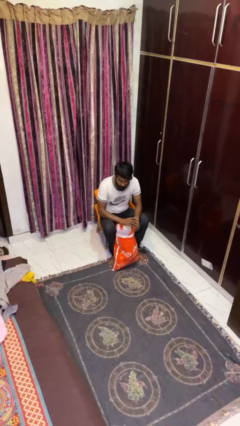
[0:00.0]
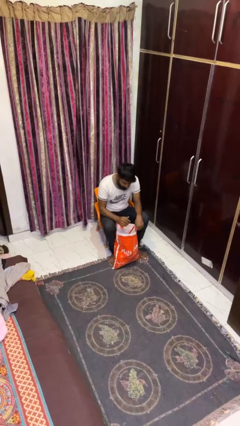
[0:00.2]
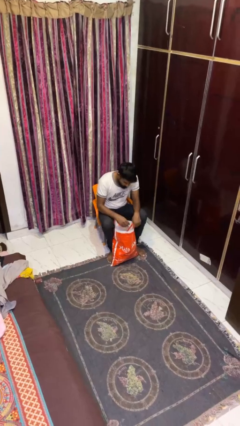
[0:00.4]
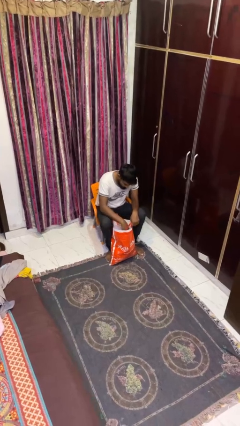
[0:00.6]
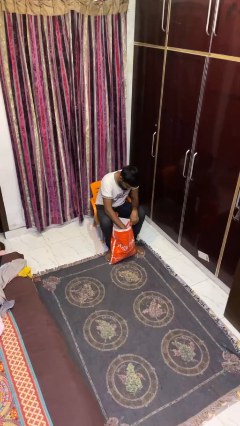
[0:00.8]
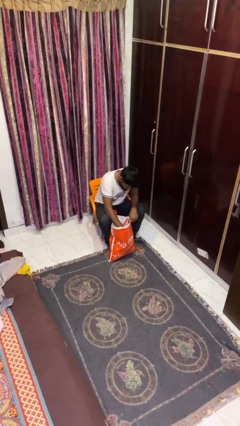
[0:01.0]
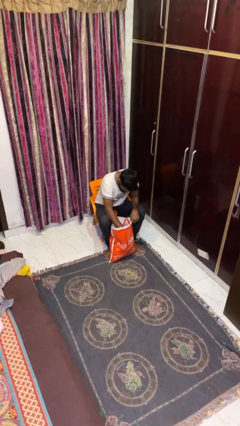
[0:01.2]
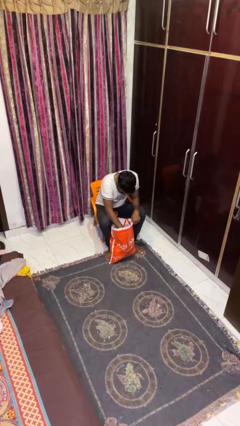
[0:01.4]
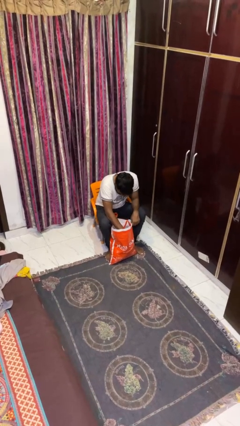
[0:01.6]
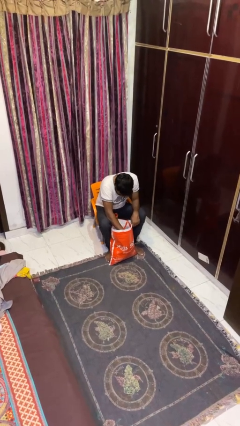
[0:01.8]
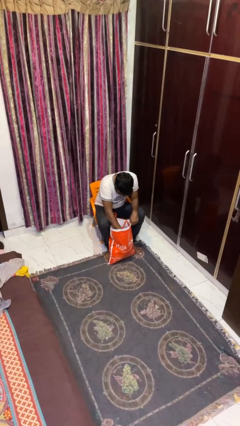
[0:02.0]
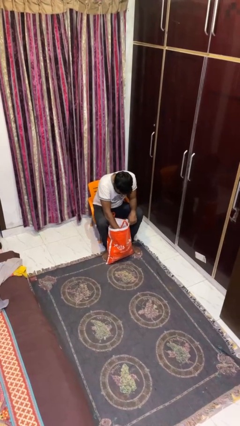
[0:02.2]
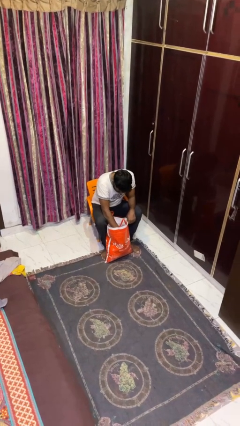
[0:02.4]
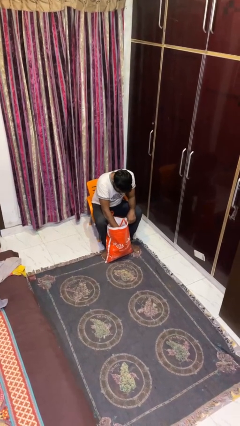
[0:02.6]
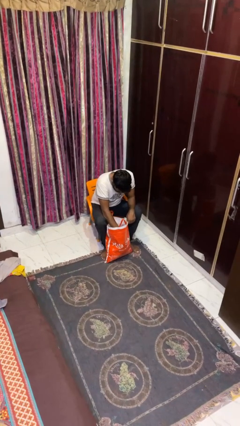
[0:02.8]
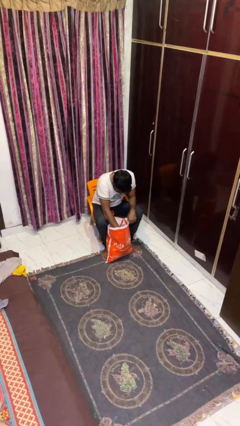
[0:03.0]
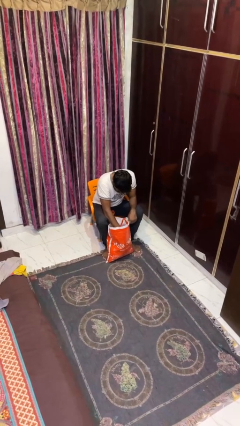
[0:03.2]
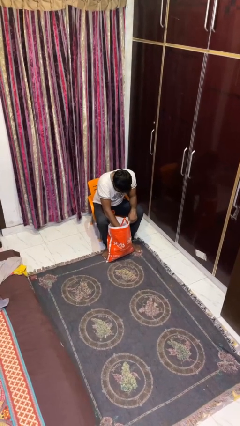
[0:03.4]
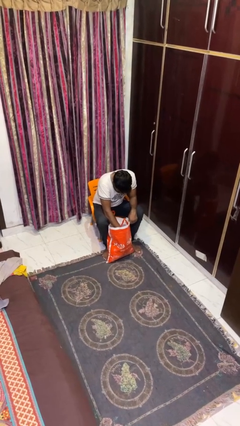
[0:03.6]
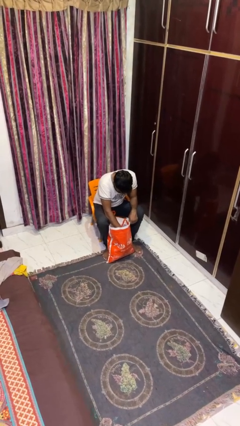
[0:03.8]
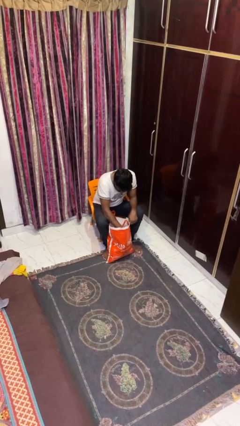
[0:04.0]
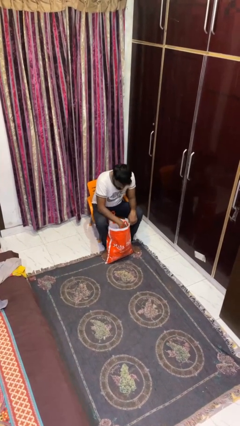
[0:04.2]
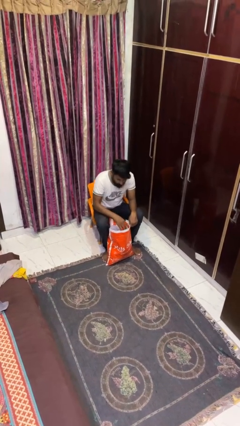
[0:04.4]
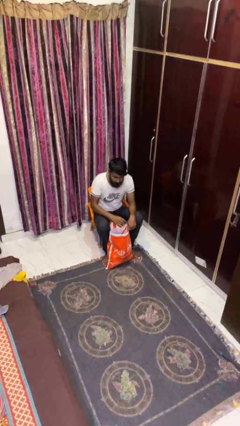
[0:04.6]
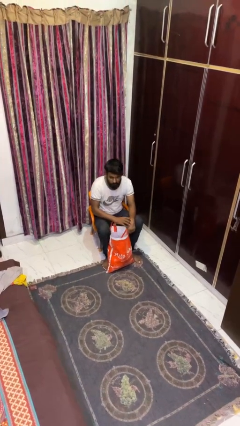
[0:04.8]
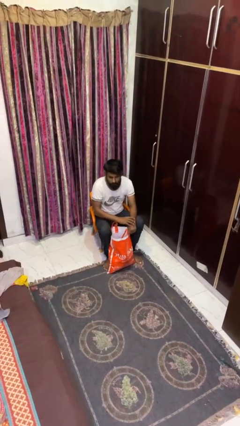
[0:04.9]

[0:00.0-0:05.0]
person searches in bag

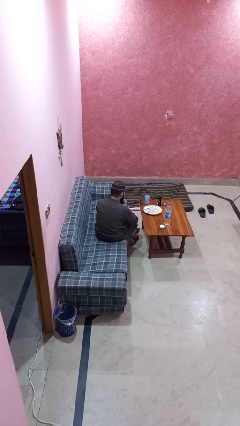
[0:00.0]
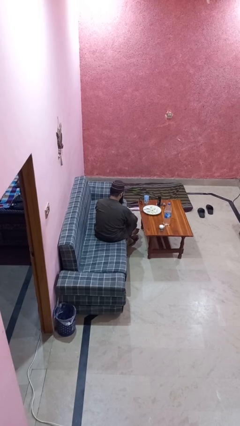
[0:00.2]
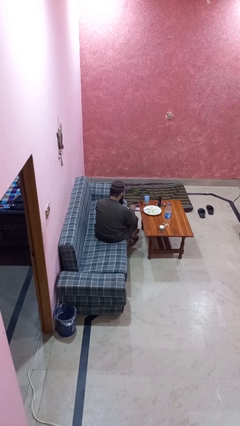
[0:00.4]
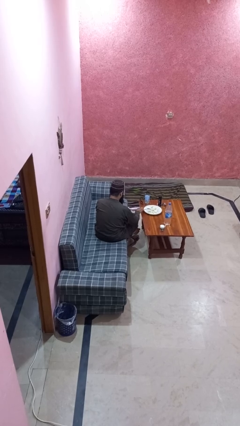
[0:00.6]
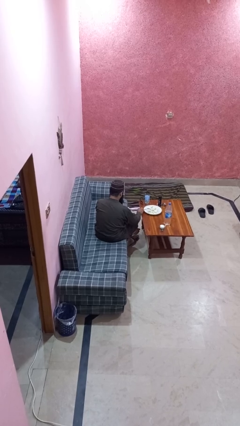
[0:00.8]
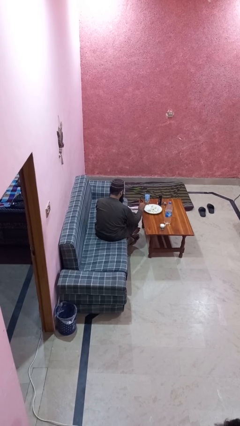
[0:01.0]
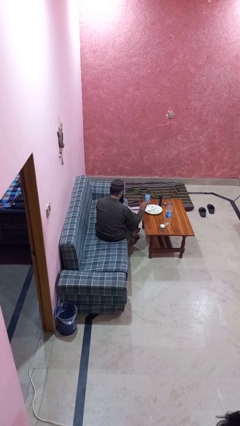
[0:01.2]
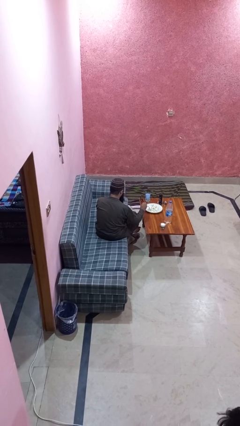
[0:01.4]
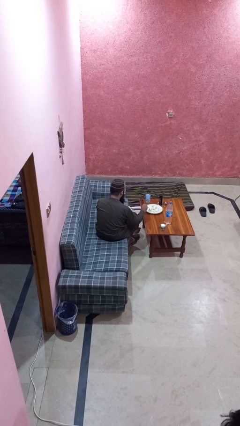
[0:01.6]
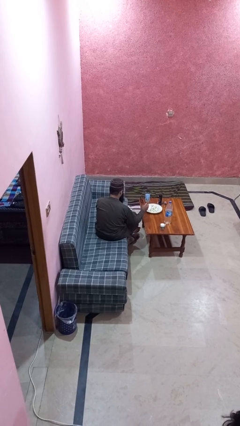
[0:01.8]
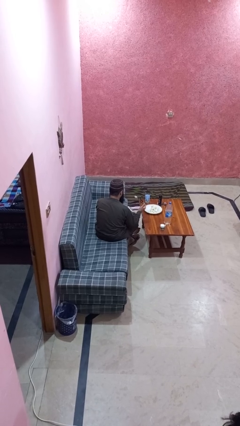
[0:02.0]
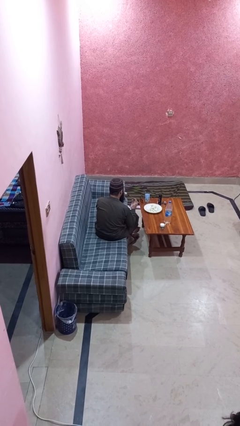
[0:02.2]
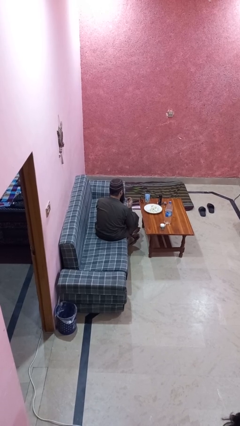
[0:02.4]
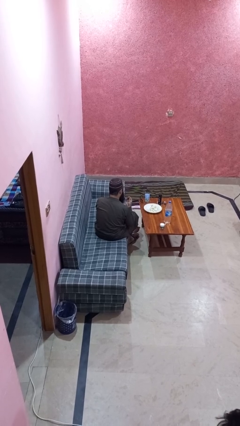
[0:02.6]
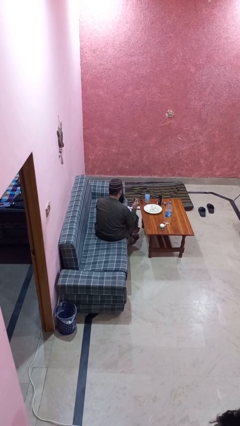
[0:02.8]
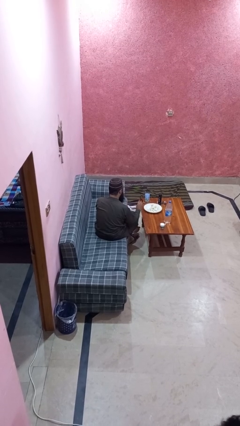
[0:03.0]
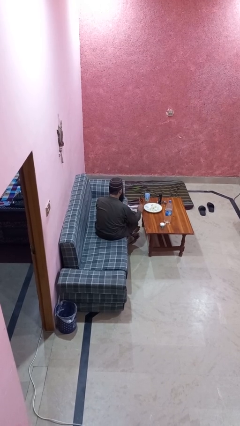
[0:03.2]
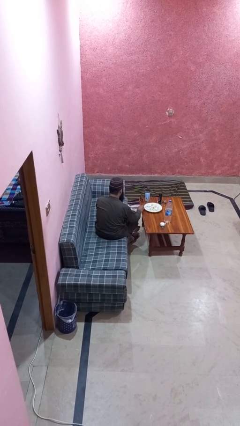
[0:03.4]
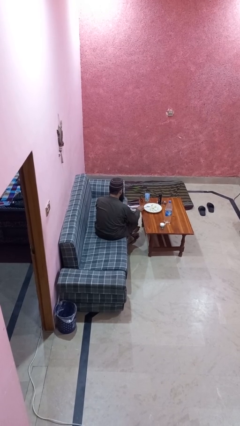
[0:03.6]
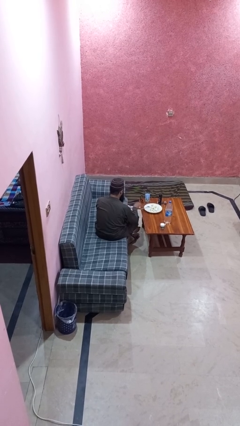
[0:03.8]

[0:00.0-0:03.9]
person eats with utensil

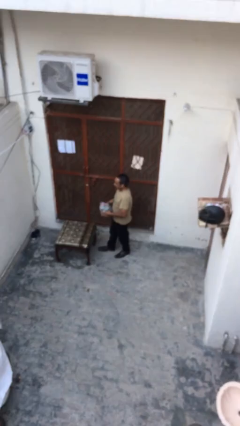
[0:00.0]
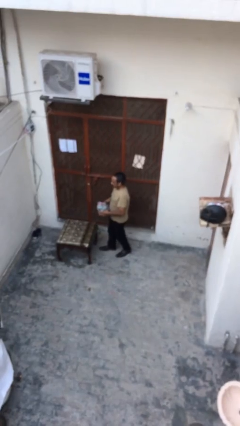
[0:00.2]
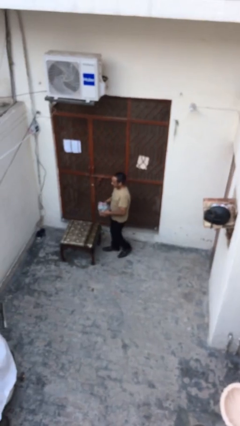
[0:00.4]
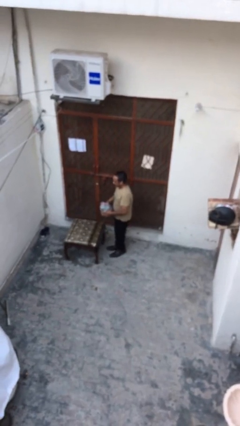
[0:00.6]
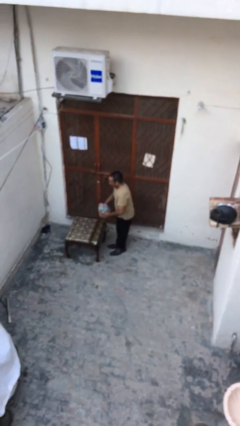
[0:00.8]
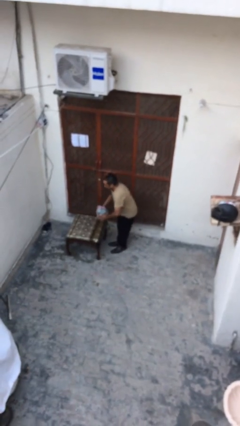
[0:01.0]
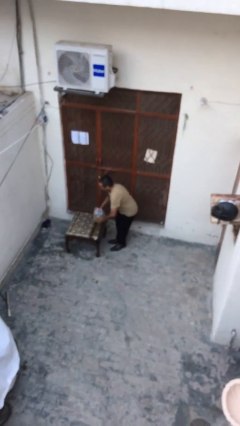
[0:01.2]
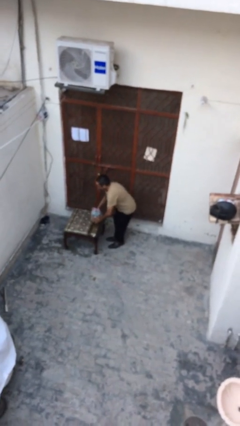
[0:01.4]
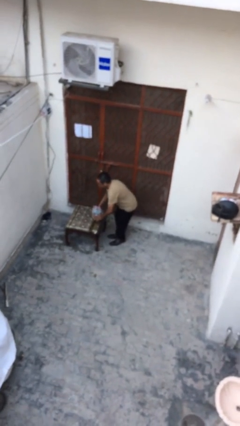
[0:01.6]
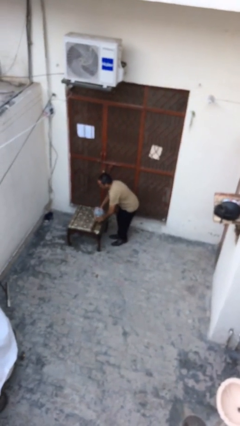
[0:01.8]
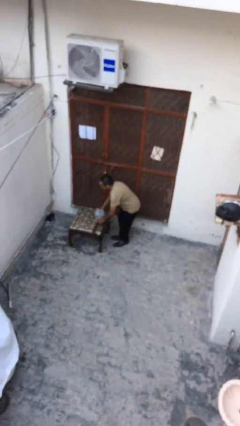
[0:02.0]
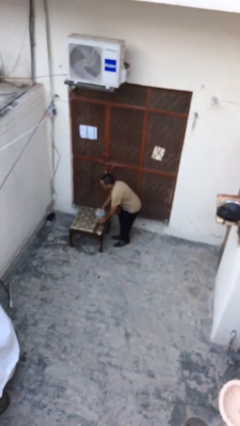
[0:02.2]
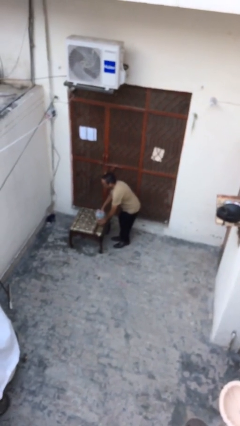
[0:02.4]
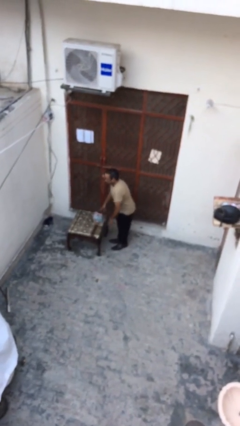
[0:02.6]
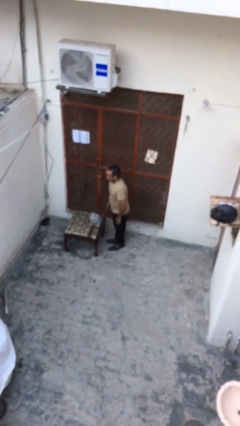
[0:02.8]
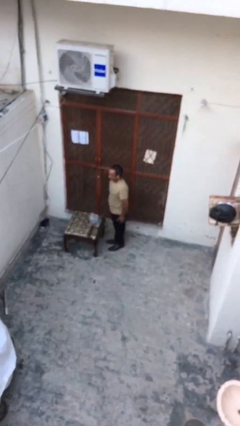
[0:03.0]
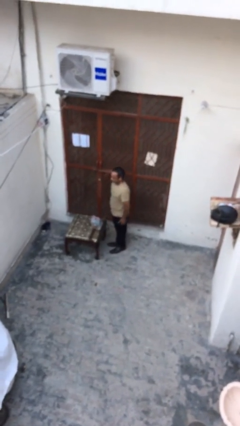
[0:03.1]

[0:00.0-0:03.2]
person puts down object on table

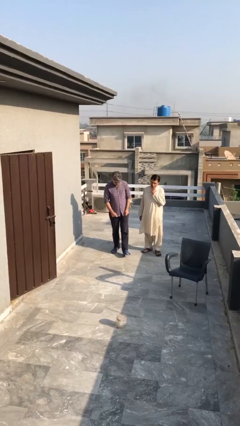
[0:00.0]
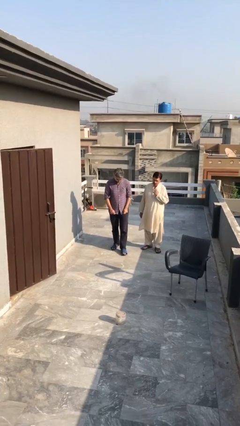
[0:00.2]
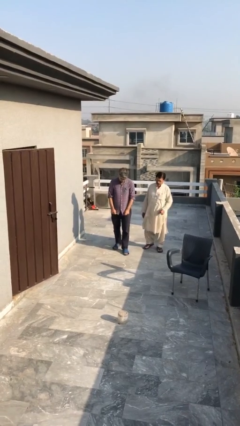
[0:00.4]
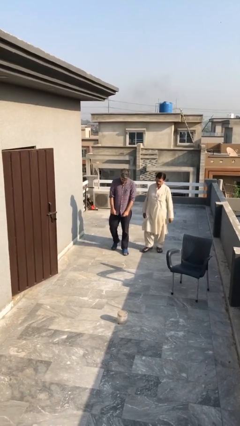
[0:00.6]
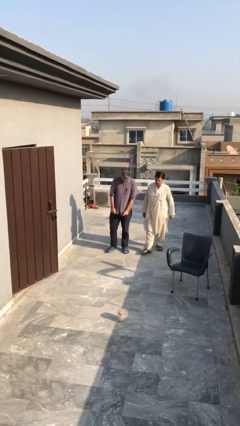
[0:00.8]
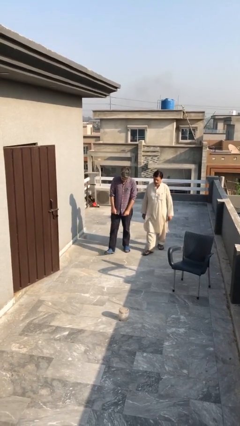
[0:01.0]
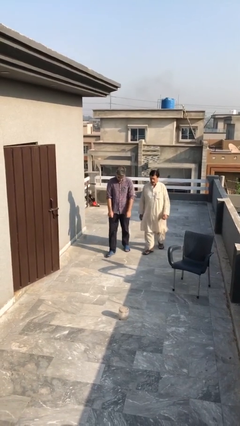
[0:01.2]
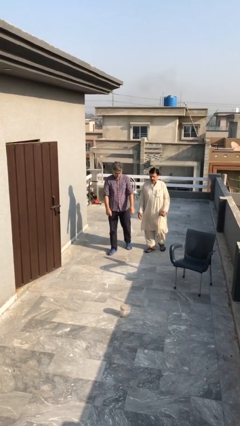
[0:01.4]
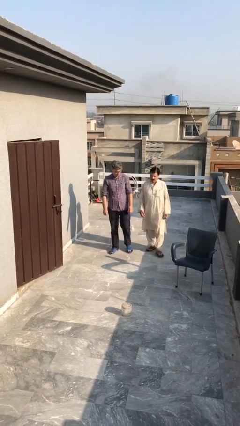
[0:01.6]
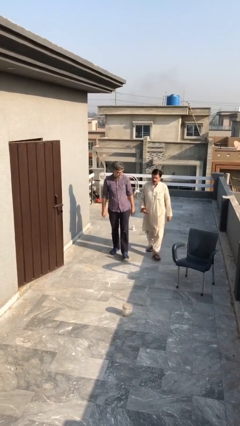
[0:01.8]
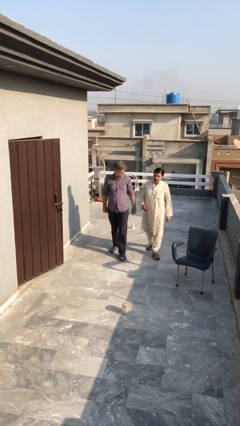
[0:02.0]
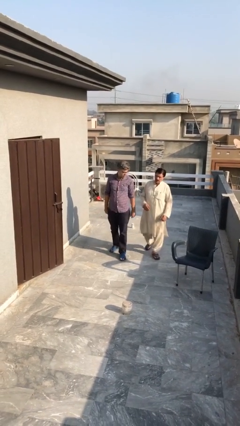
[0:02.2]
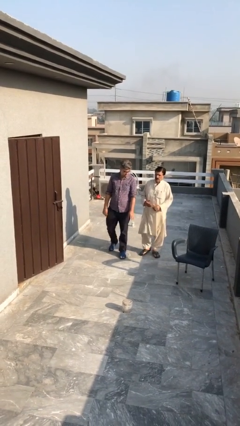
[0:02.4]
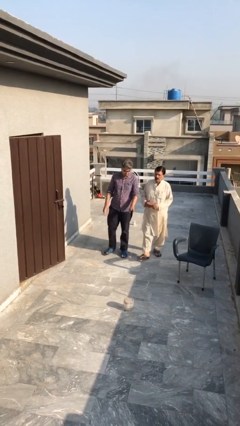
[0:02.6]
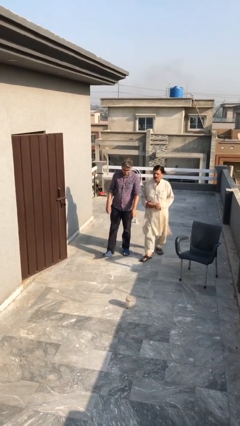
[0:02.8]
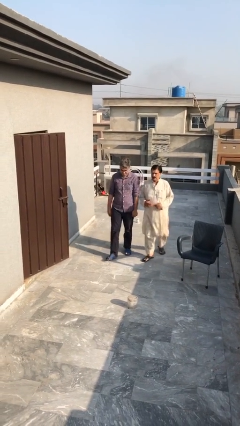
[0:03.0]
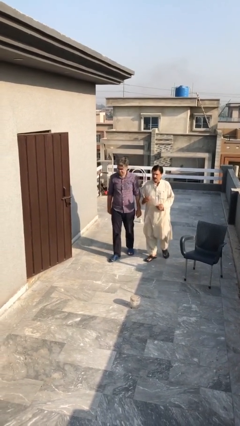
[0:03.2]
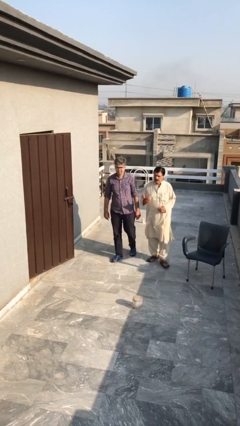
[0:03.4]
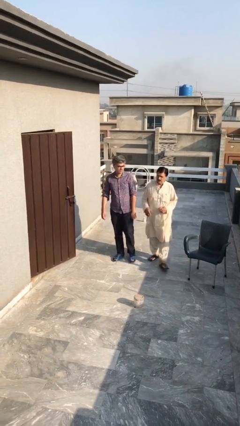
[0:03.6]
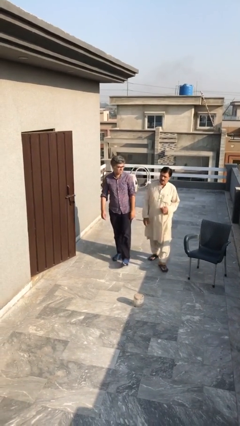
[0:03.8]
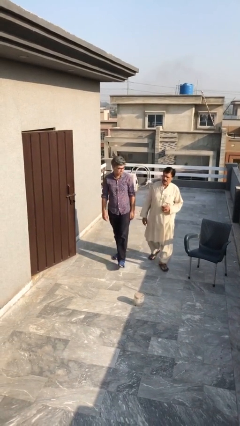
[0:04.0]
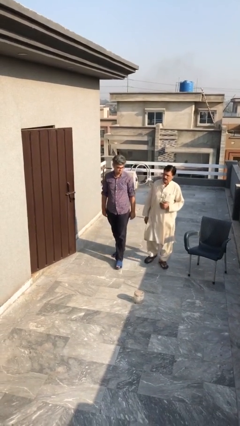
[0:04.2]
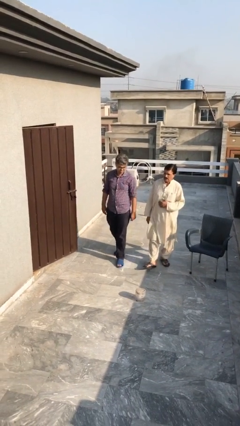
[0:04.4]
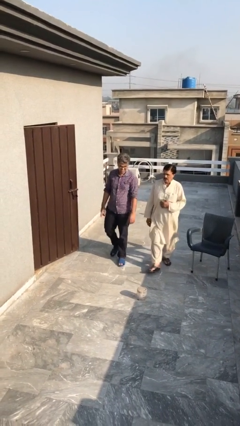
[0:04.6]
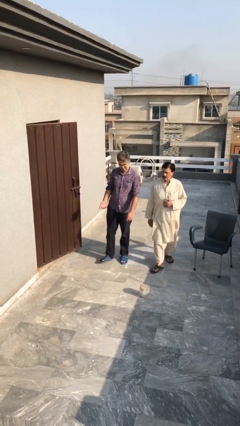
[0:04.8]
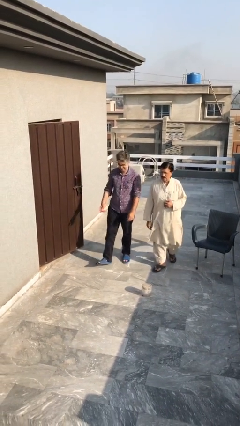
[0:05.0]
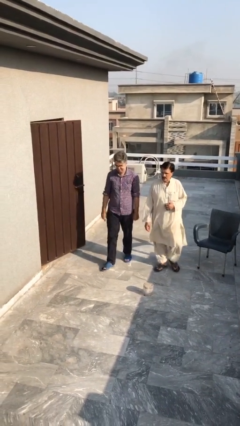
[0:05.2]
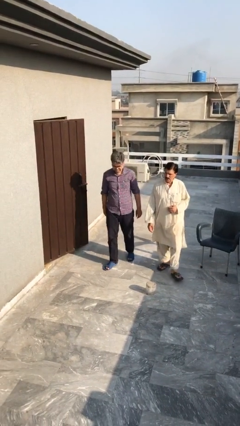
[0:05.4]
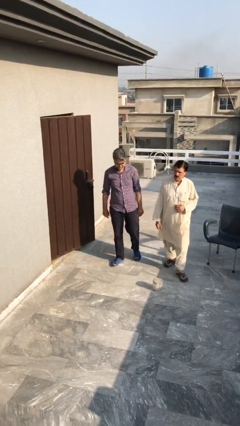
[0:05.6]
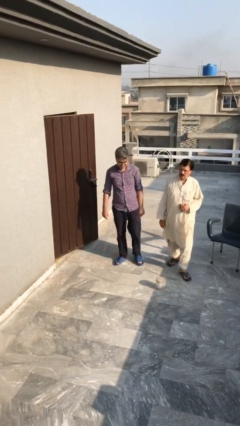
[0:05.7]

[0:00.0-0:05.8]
person talks to person

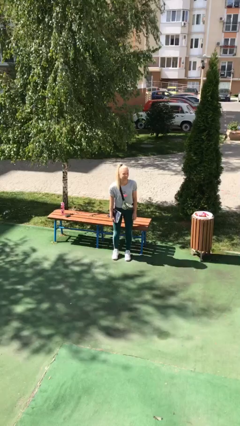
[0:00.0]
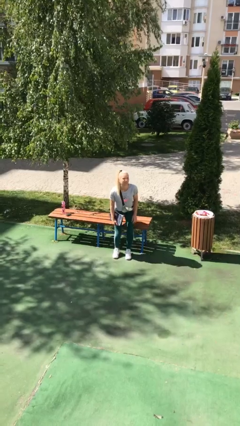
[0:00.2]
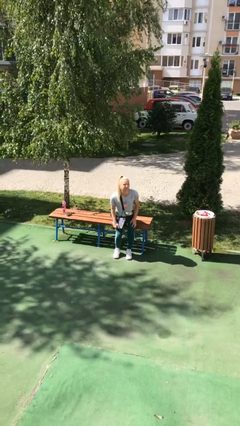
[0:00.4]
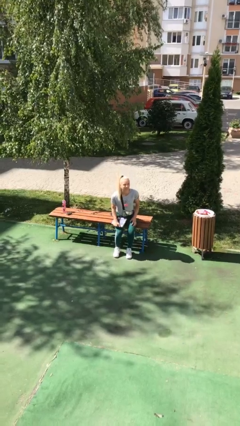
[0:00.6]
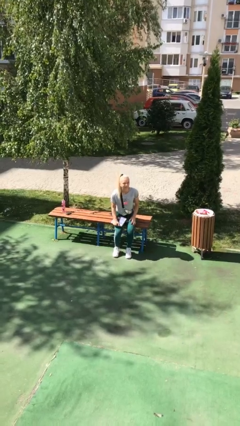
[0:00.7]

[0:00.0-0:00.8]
person sits down
